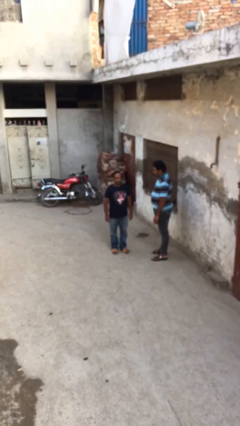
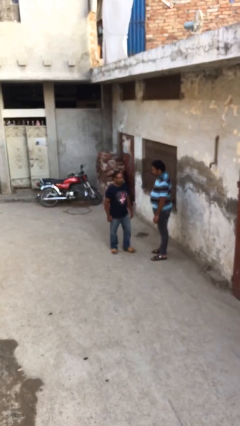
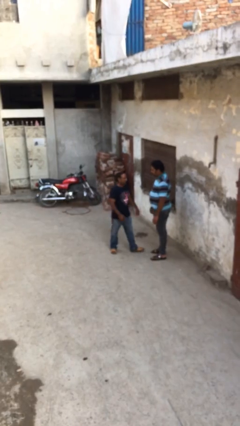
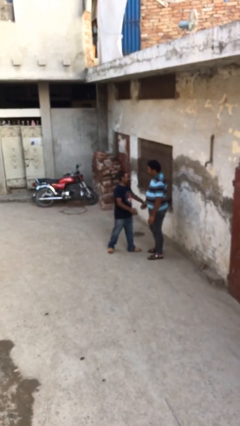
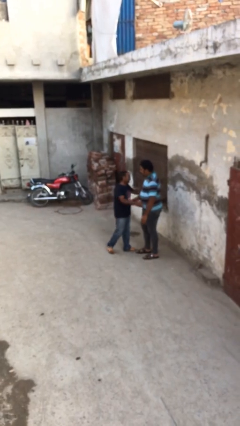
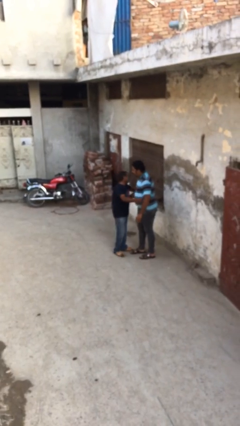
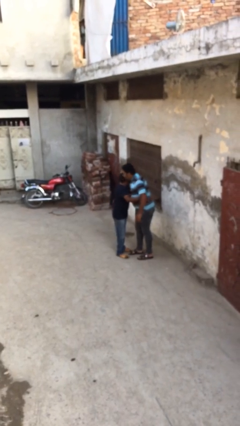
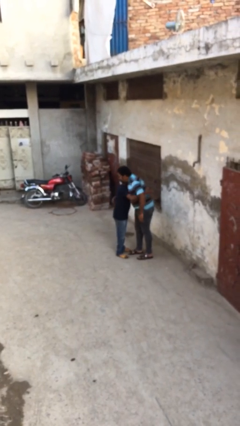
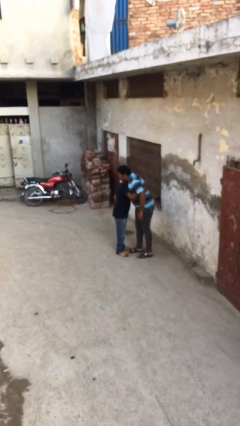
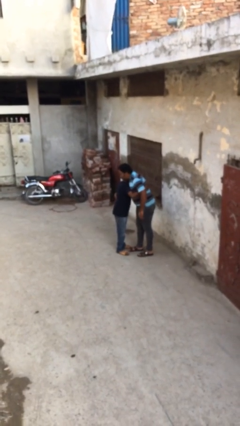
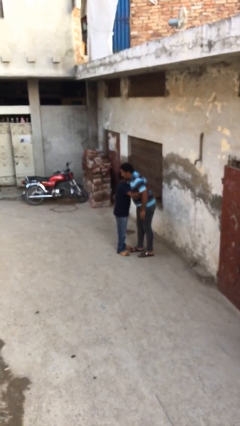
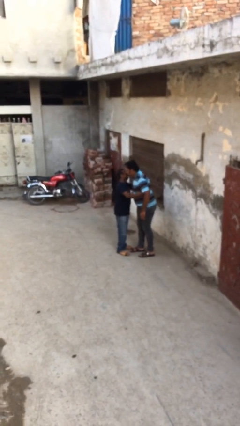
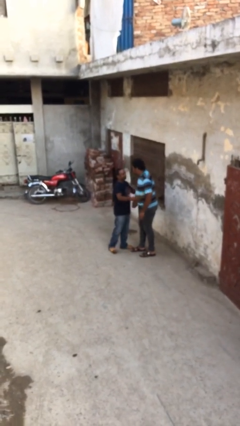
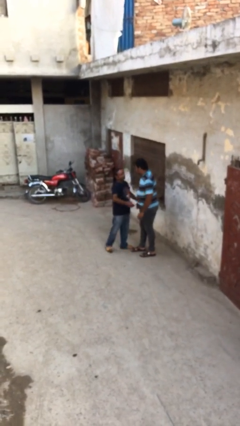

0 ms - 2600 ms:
person embraces person

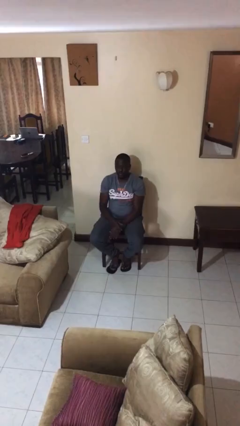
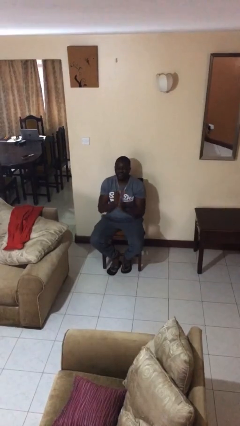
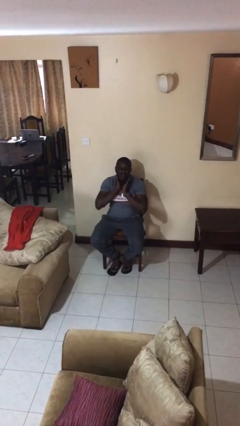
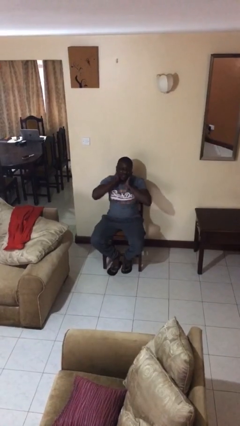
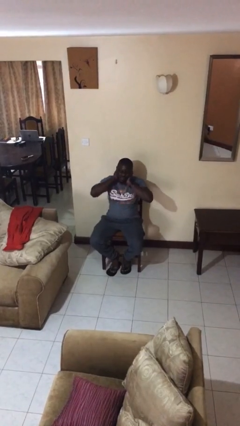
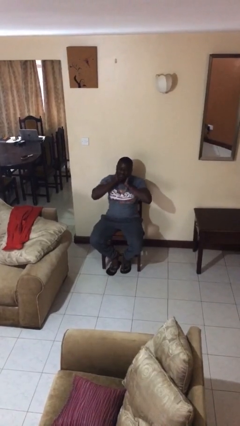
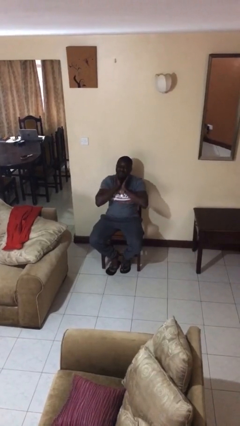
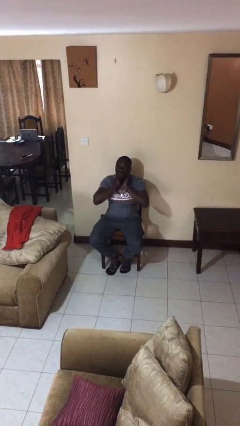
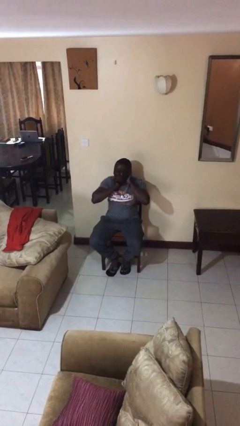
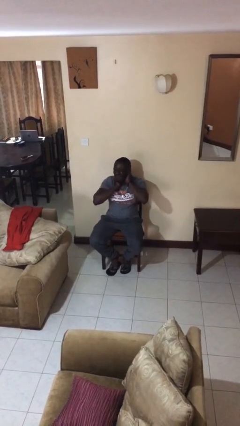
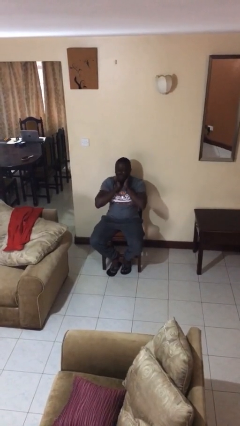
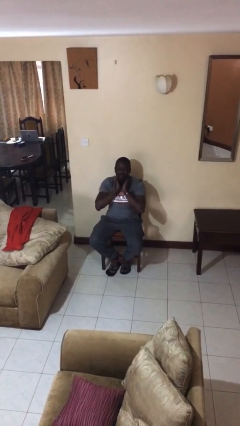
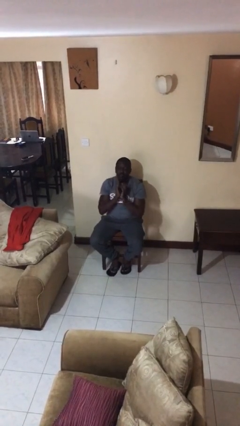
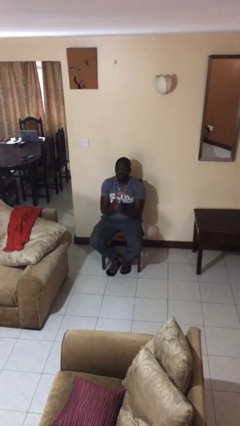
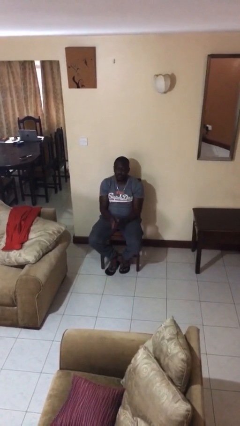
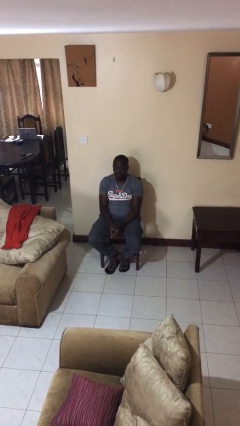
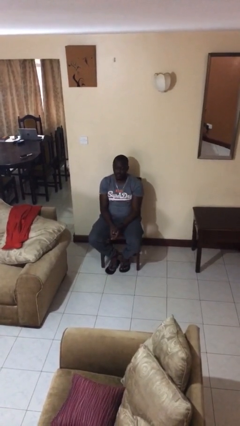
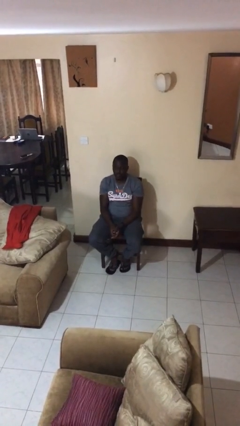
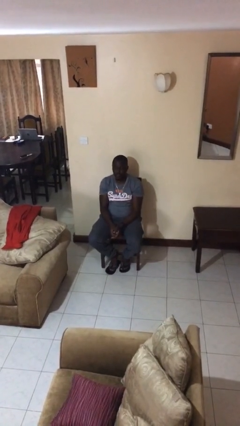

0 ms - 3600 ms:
person rubs neck

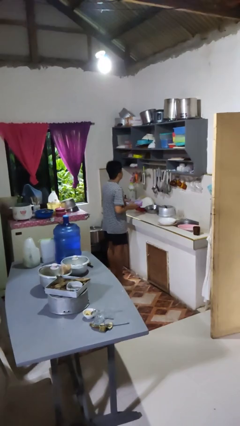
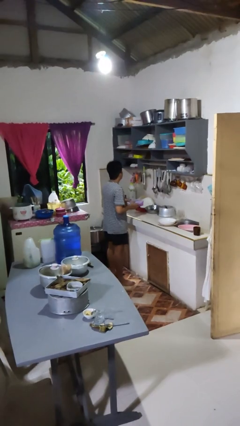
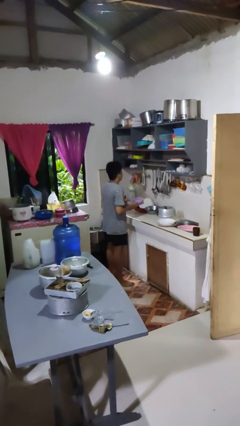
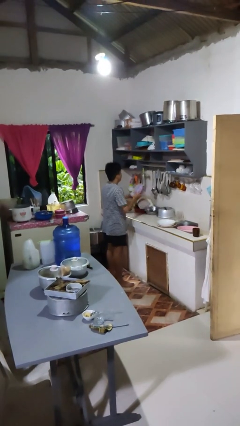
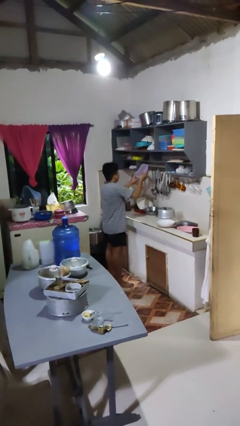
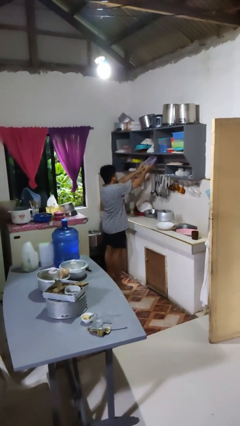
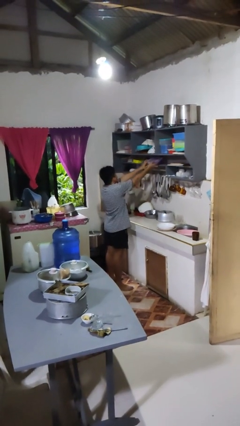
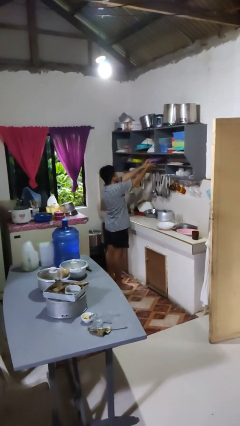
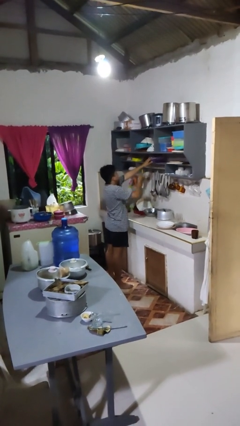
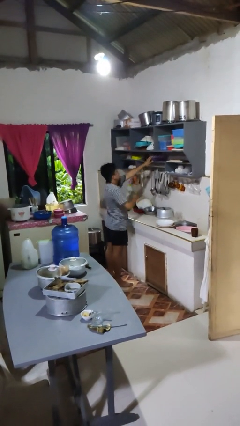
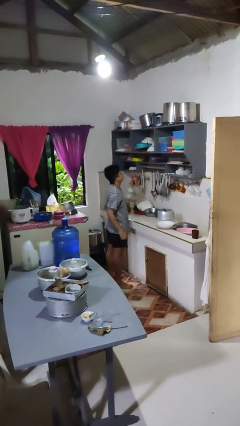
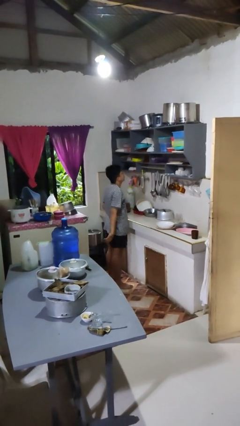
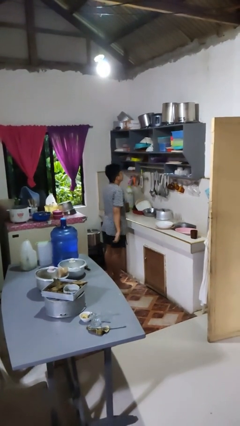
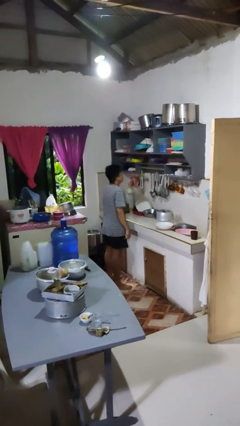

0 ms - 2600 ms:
person puts down object into cabinet

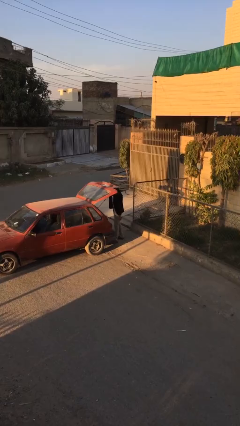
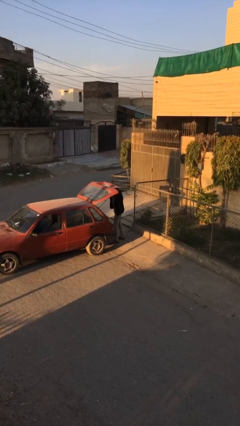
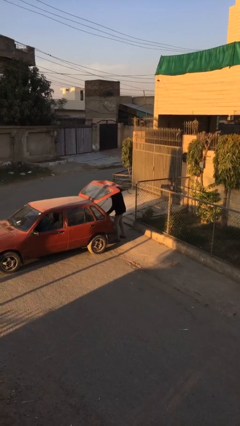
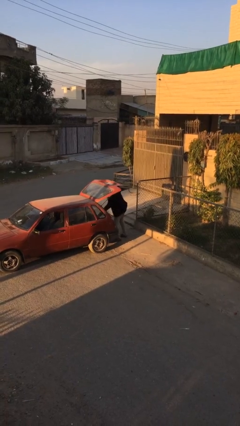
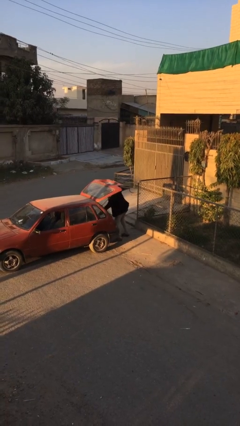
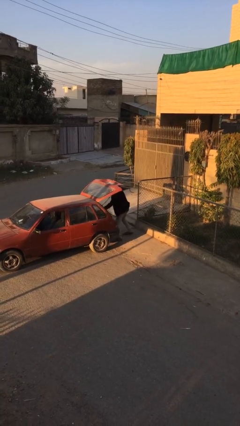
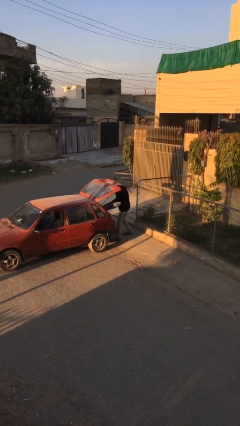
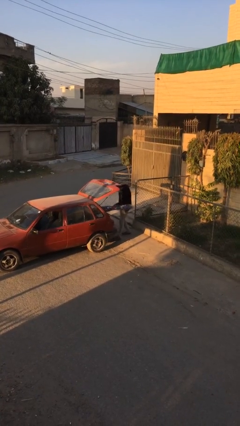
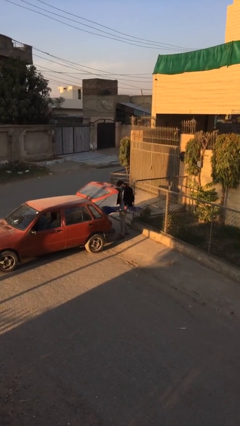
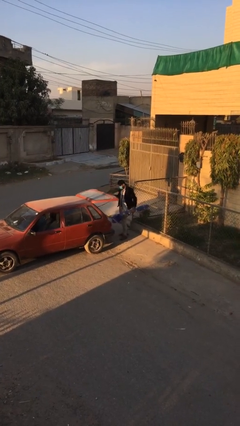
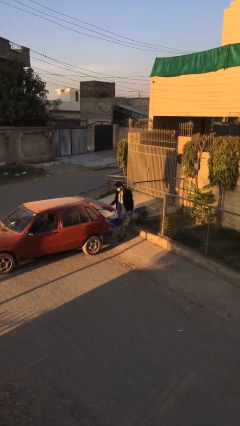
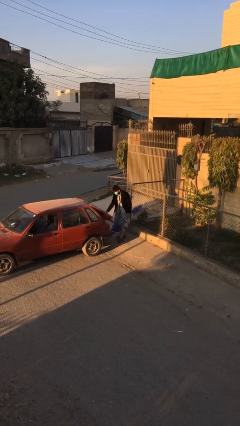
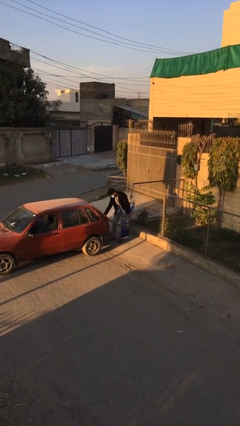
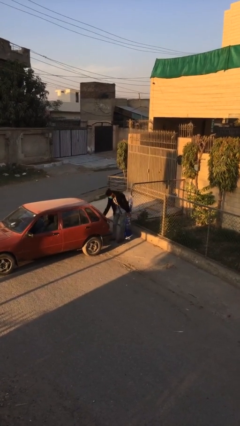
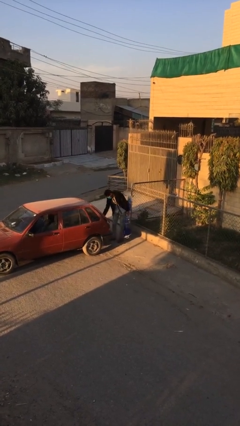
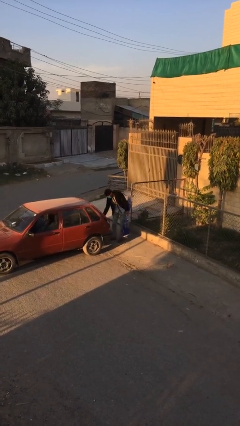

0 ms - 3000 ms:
person unloads car

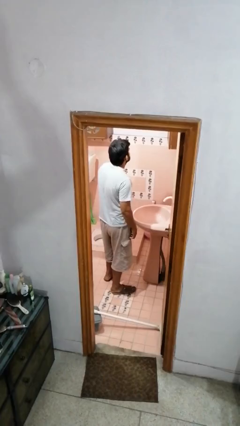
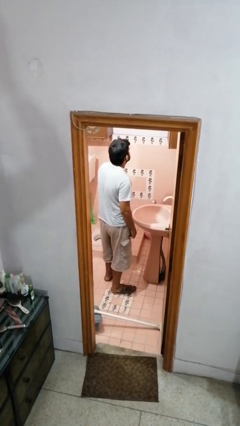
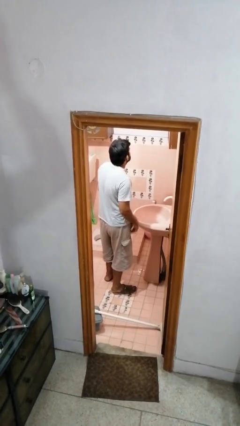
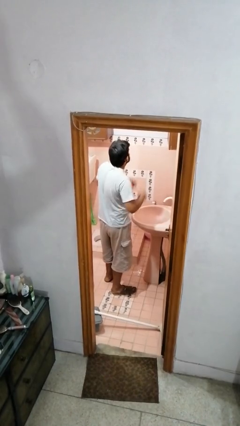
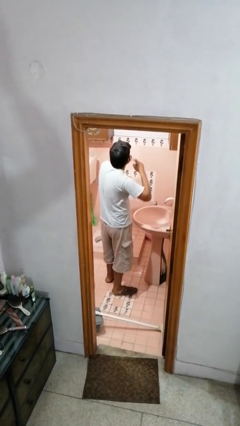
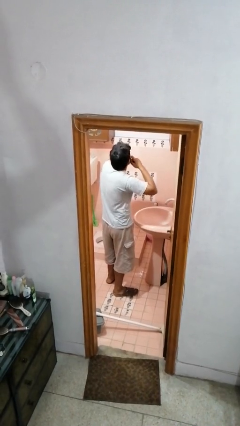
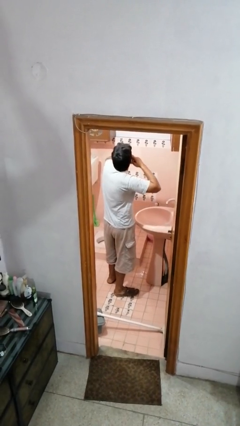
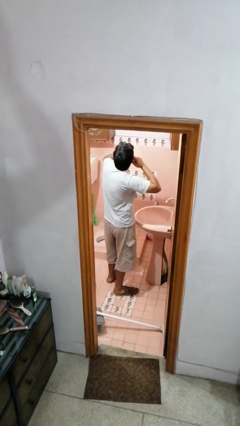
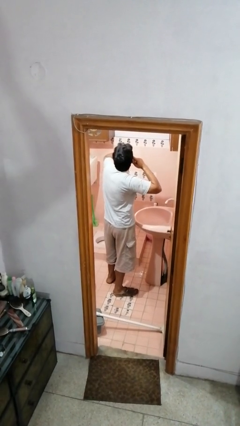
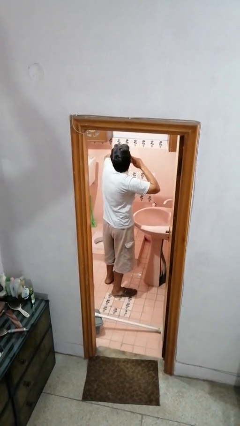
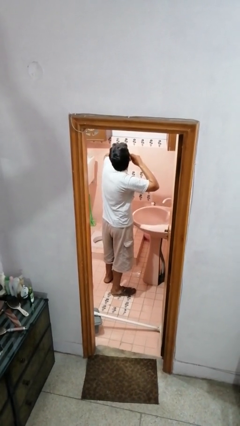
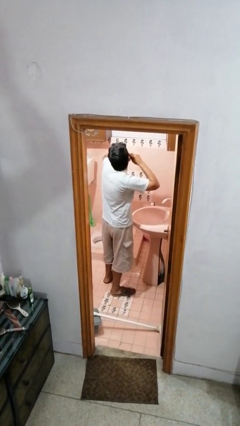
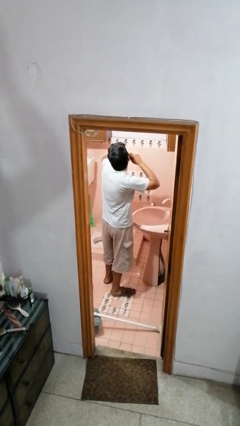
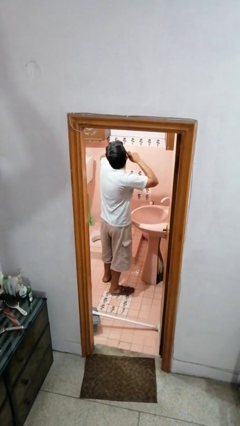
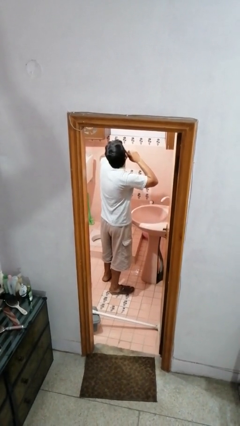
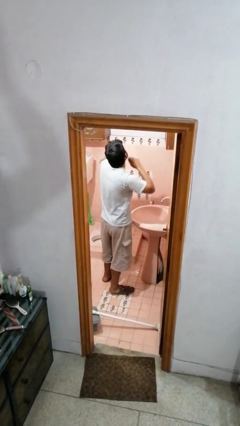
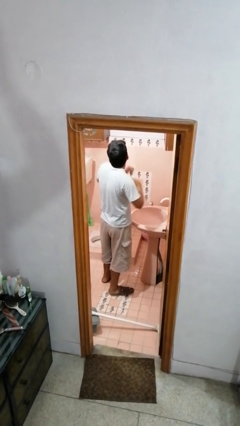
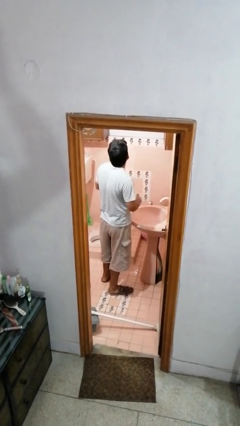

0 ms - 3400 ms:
person flosses

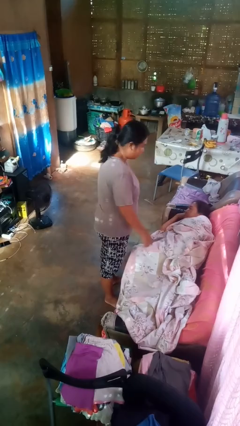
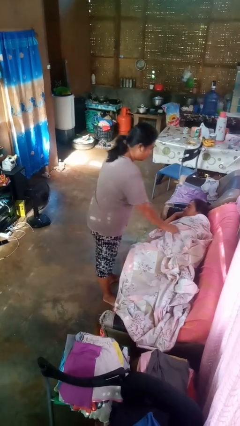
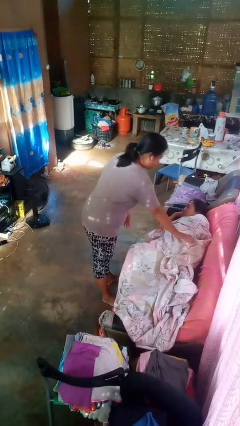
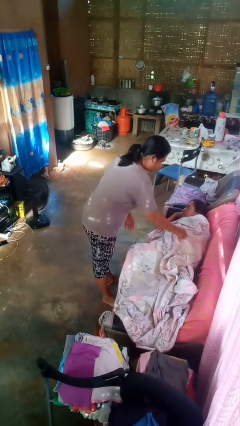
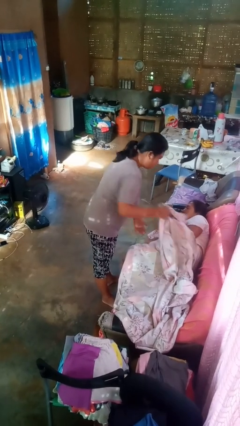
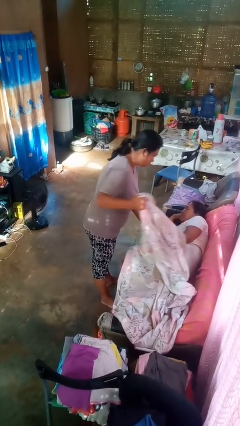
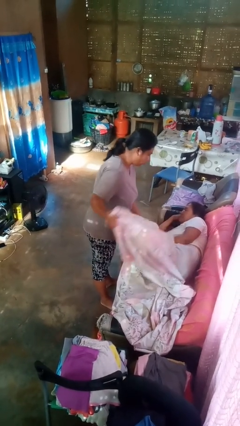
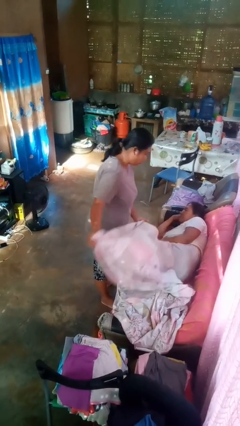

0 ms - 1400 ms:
person uncovers friend with blanket

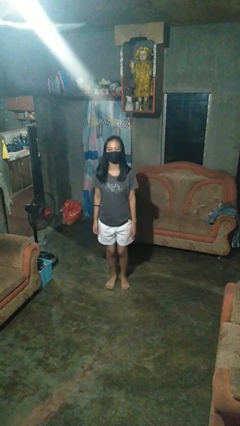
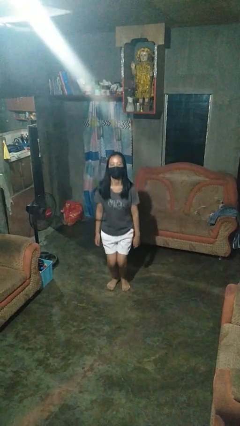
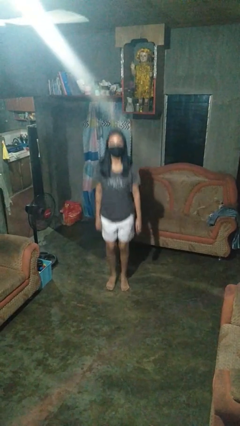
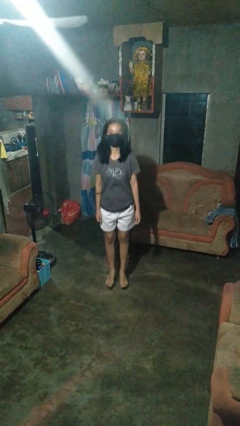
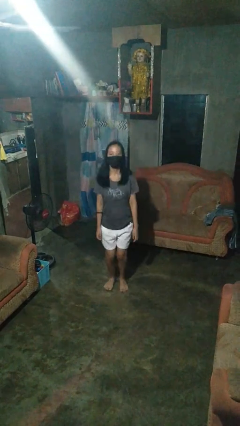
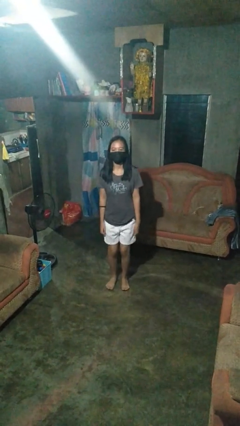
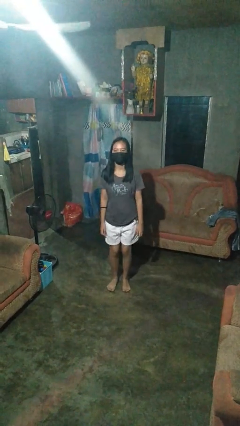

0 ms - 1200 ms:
person jumps
